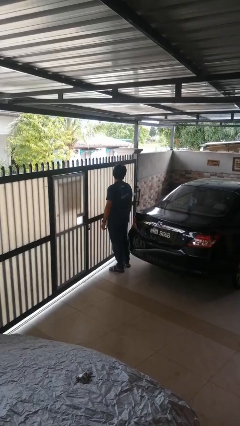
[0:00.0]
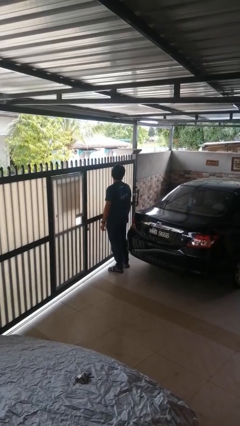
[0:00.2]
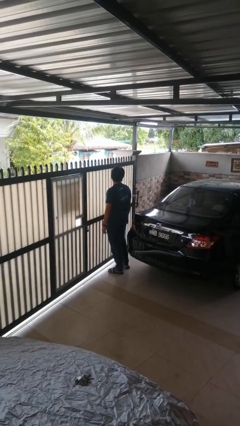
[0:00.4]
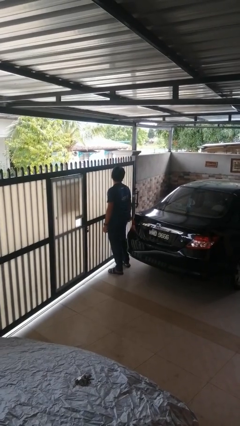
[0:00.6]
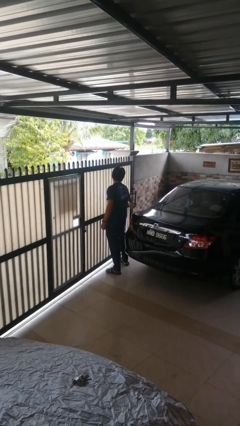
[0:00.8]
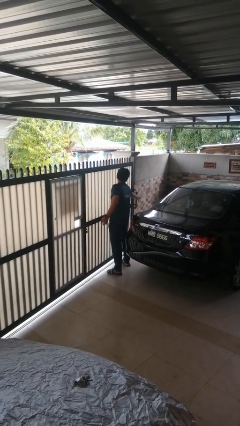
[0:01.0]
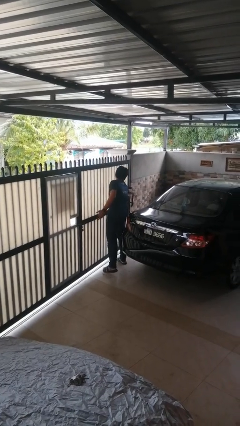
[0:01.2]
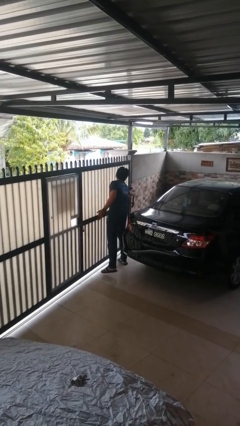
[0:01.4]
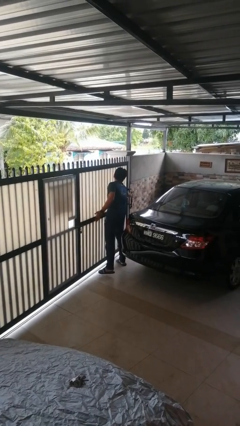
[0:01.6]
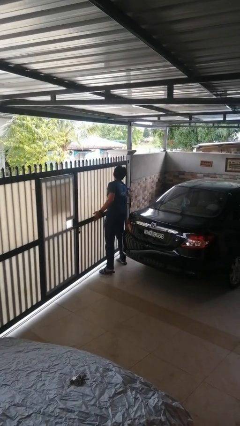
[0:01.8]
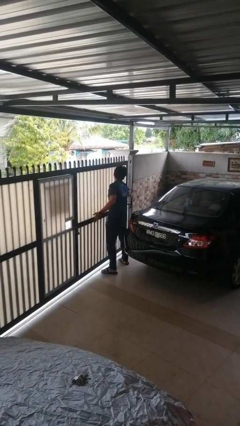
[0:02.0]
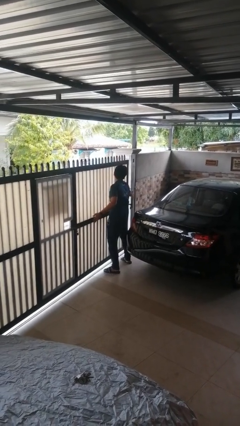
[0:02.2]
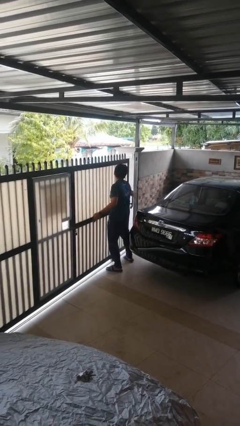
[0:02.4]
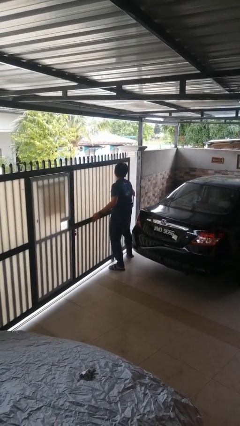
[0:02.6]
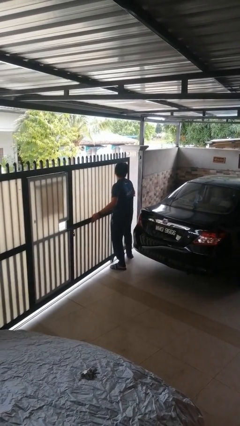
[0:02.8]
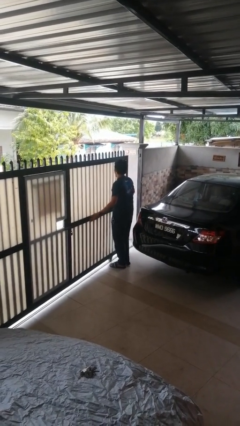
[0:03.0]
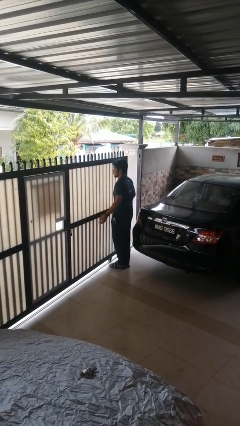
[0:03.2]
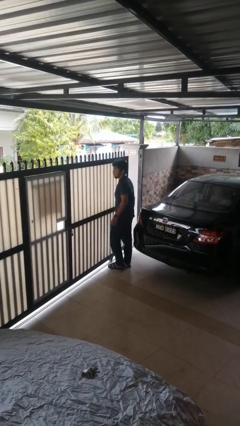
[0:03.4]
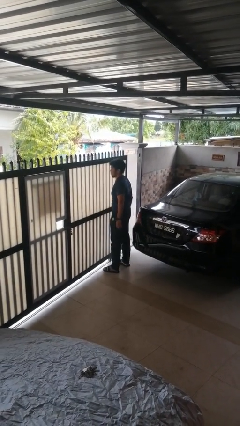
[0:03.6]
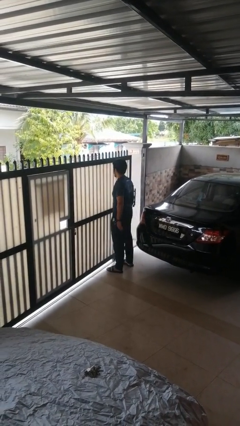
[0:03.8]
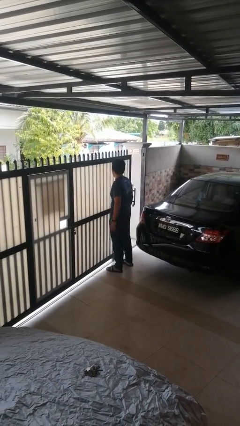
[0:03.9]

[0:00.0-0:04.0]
person opens sliding door

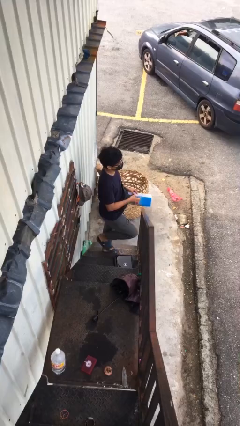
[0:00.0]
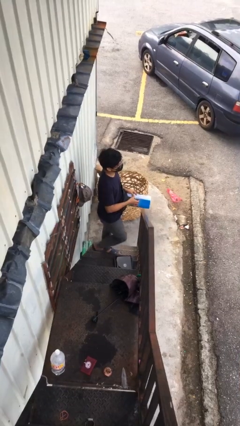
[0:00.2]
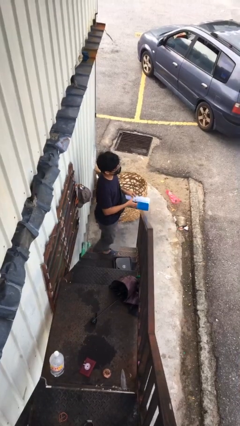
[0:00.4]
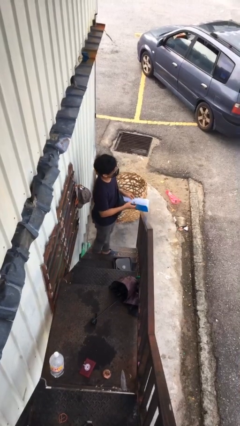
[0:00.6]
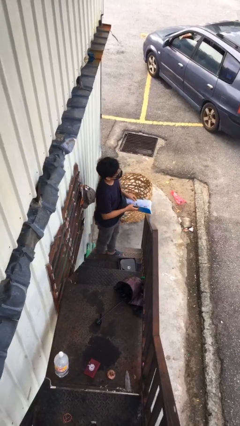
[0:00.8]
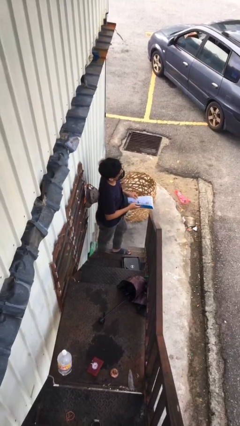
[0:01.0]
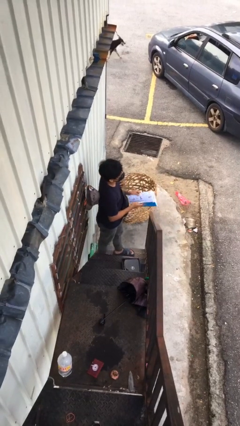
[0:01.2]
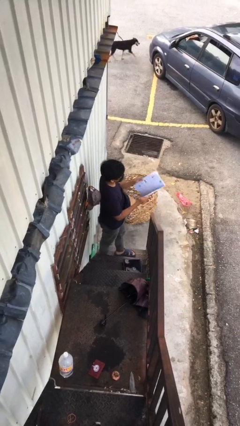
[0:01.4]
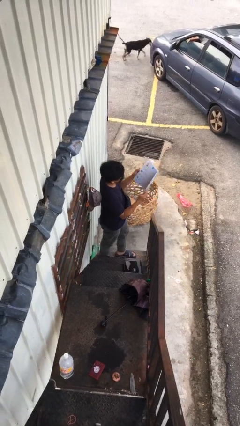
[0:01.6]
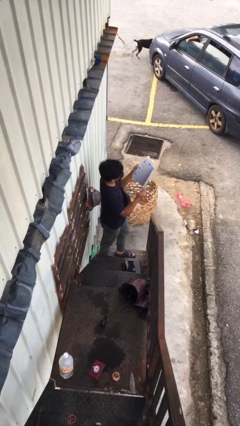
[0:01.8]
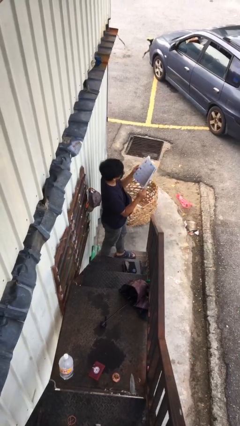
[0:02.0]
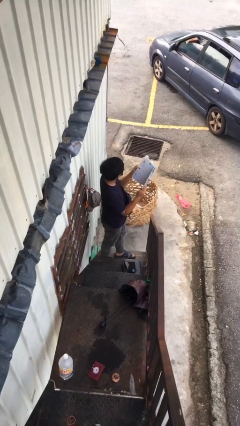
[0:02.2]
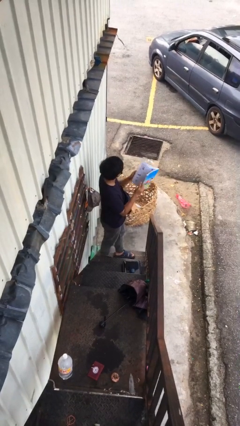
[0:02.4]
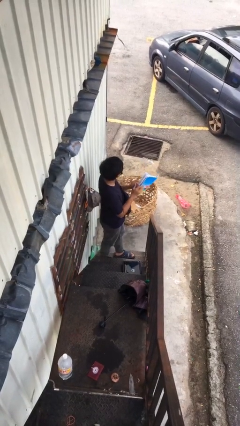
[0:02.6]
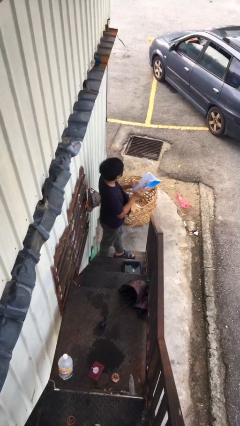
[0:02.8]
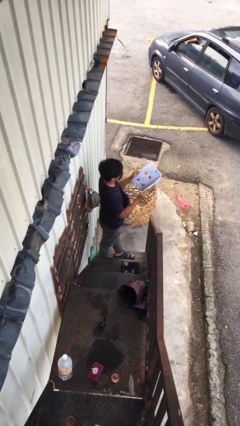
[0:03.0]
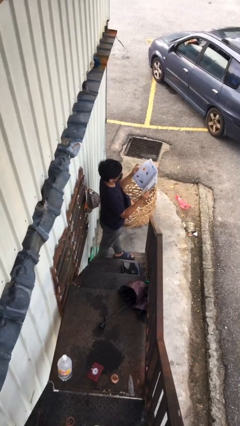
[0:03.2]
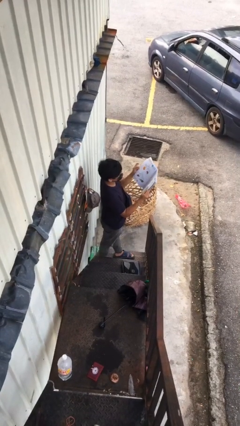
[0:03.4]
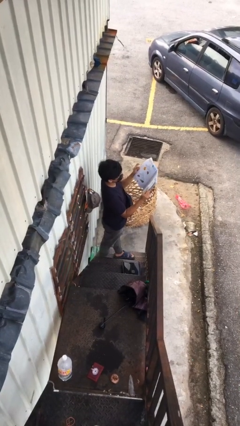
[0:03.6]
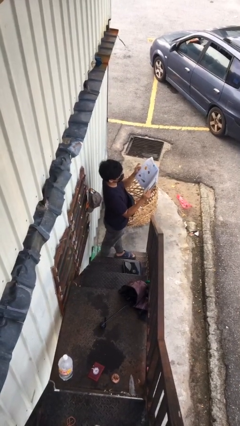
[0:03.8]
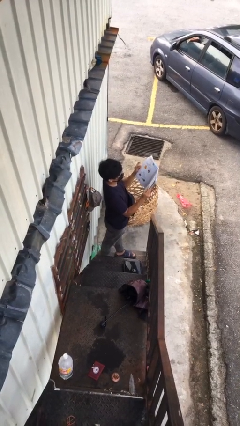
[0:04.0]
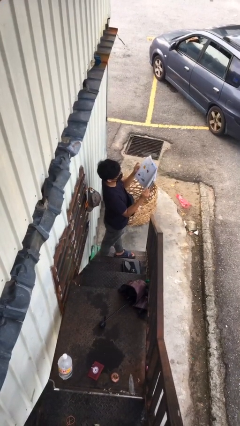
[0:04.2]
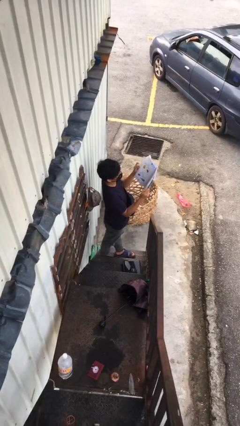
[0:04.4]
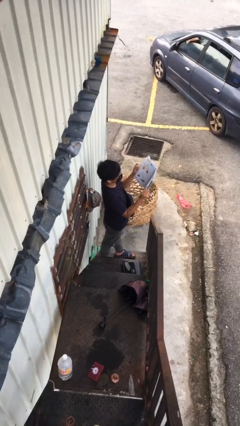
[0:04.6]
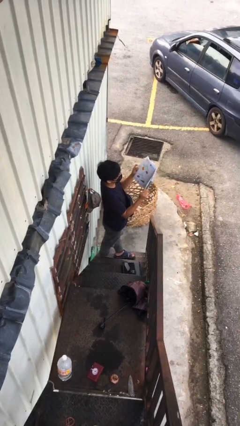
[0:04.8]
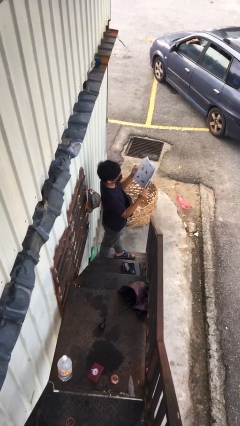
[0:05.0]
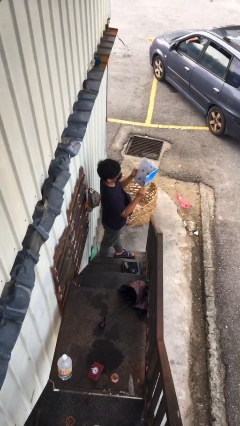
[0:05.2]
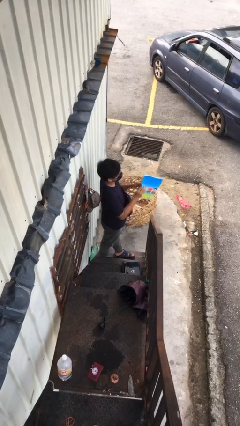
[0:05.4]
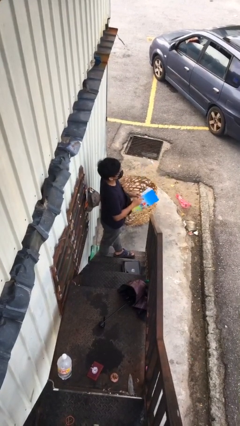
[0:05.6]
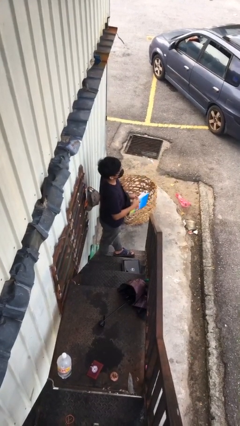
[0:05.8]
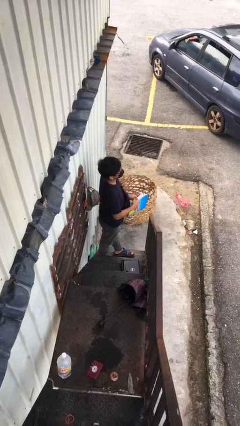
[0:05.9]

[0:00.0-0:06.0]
person reads document

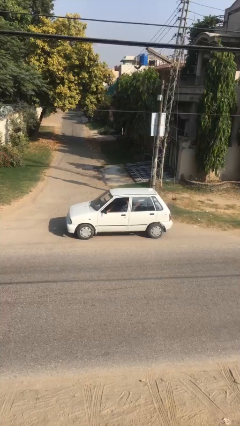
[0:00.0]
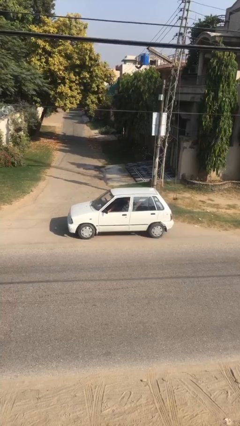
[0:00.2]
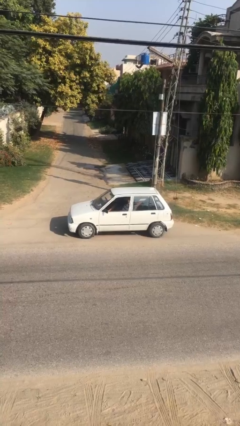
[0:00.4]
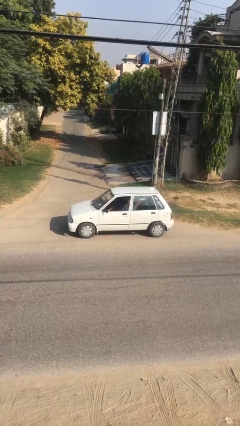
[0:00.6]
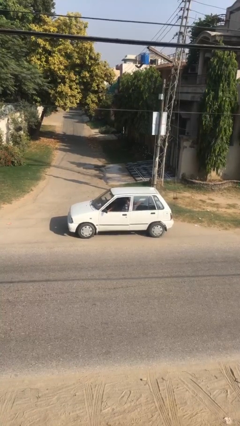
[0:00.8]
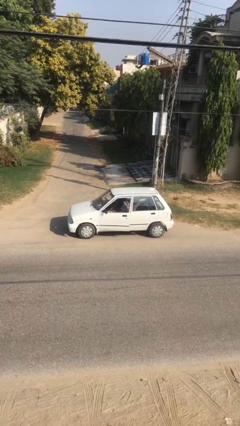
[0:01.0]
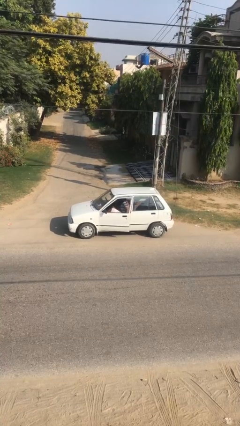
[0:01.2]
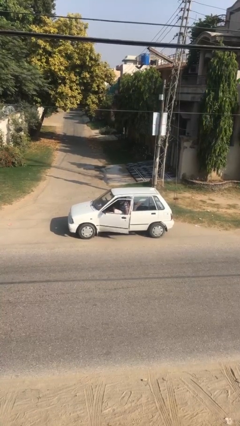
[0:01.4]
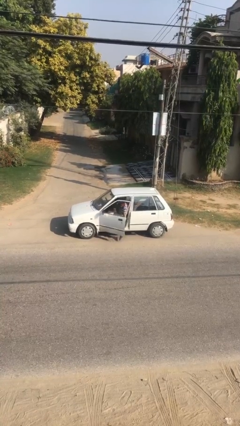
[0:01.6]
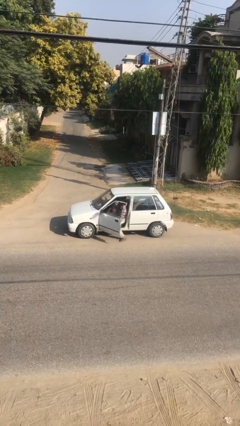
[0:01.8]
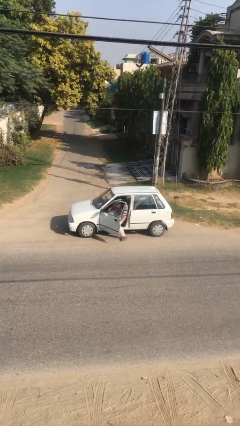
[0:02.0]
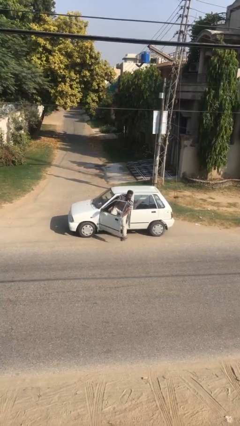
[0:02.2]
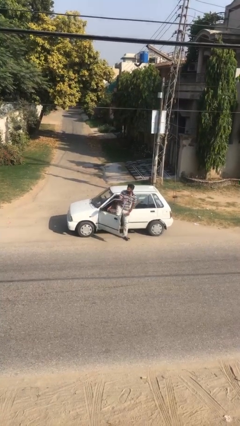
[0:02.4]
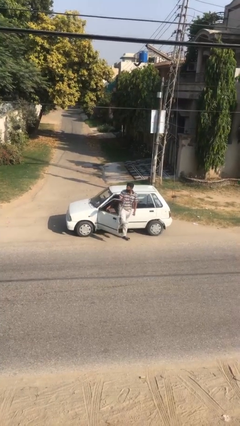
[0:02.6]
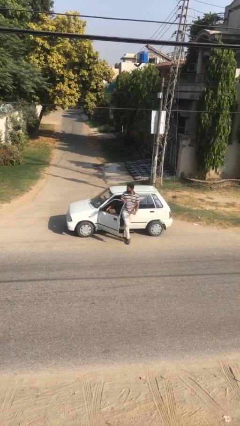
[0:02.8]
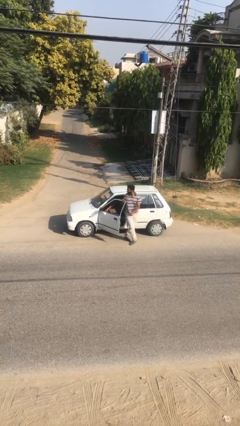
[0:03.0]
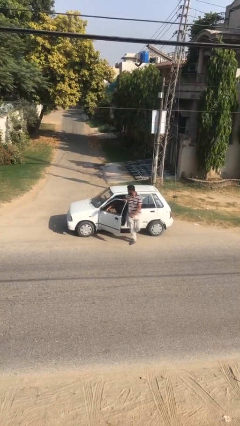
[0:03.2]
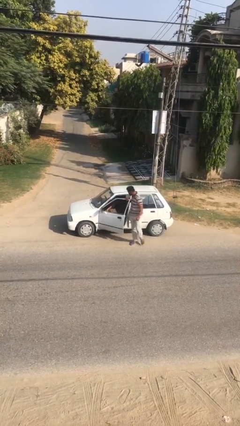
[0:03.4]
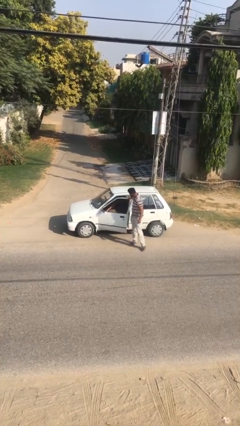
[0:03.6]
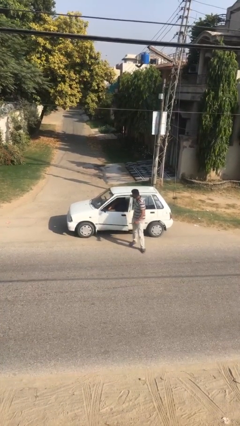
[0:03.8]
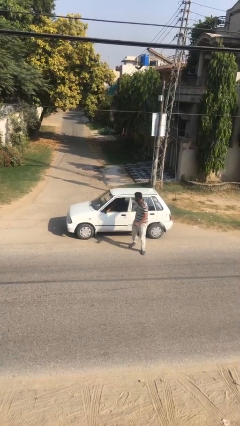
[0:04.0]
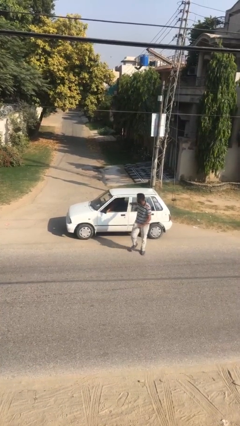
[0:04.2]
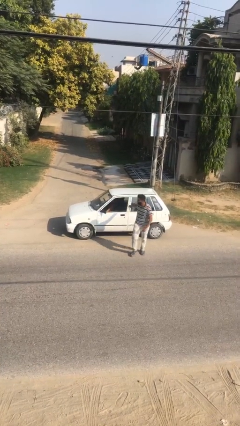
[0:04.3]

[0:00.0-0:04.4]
car drops off person

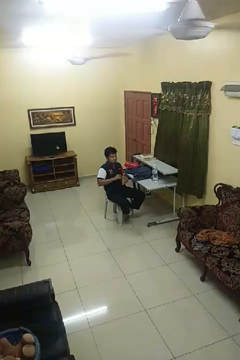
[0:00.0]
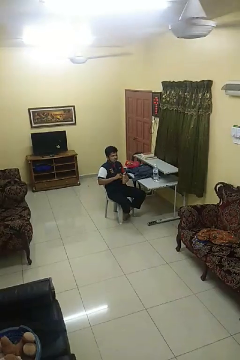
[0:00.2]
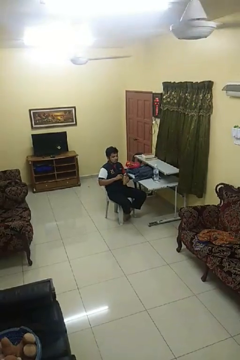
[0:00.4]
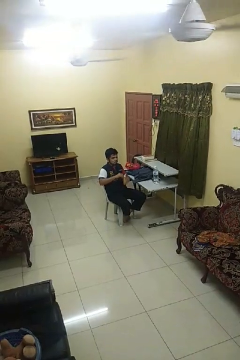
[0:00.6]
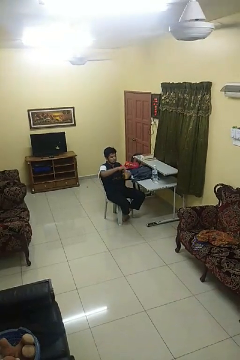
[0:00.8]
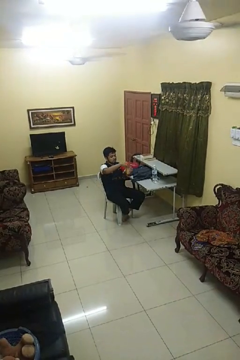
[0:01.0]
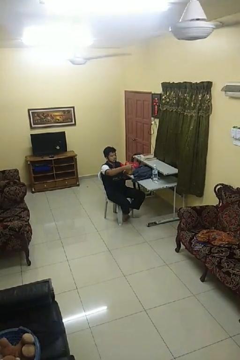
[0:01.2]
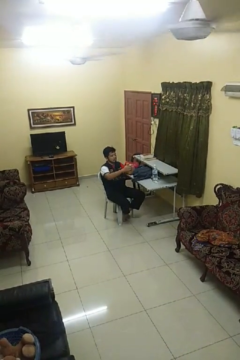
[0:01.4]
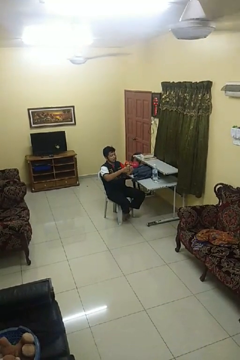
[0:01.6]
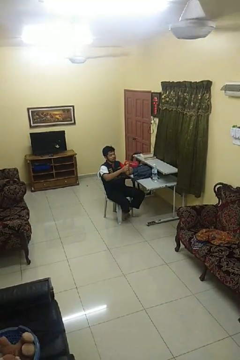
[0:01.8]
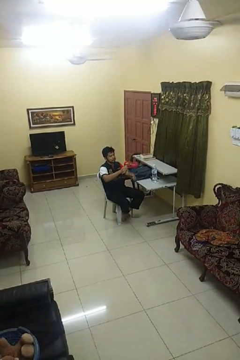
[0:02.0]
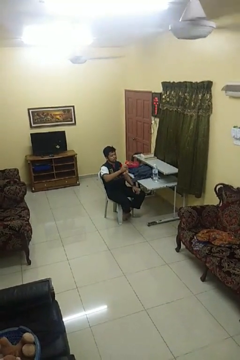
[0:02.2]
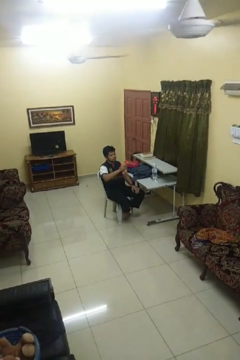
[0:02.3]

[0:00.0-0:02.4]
person opens beverage can

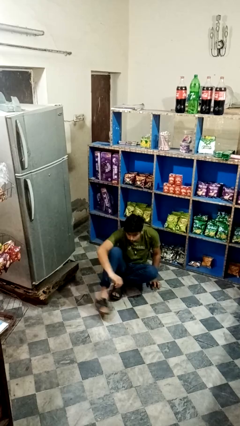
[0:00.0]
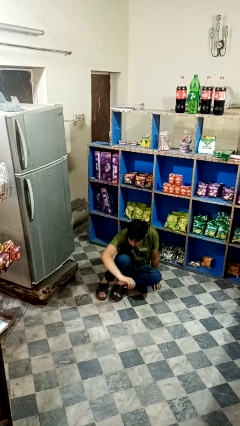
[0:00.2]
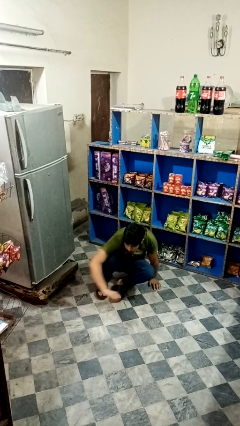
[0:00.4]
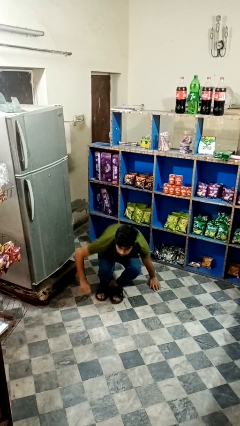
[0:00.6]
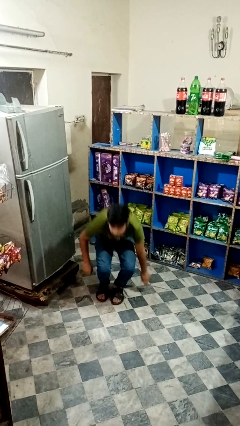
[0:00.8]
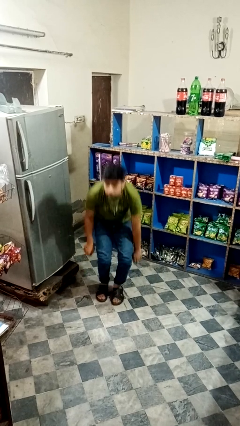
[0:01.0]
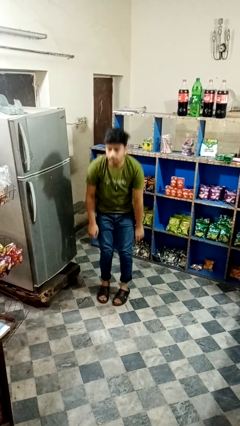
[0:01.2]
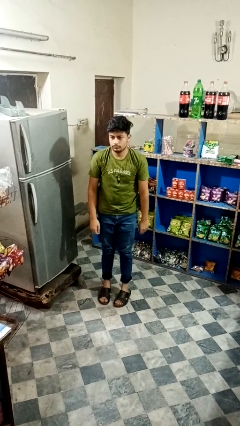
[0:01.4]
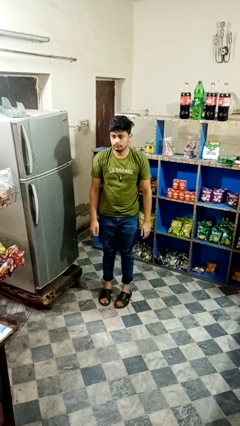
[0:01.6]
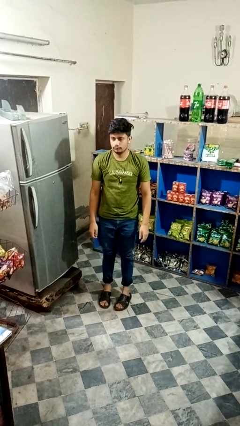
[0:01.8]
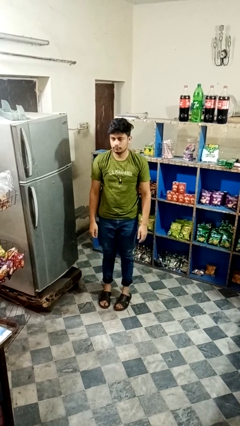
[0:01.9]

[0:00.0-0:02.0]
person stands up from floor
